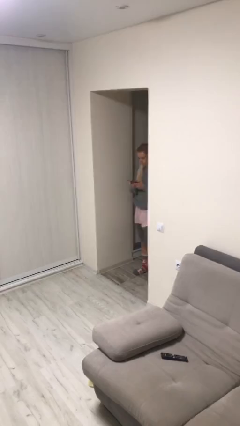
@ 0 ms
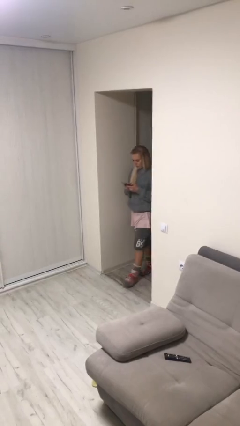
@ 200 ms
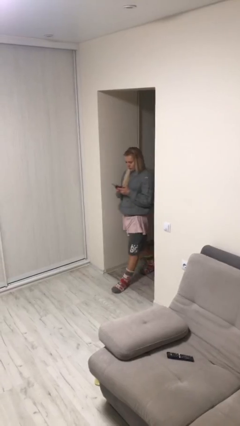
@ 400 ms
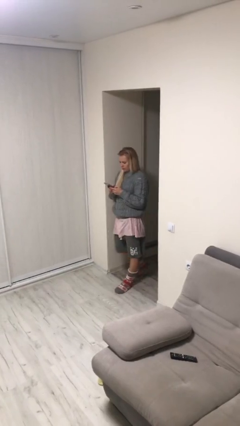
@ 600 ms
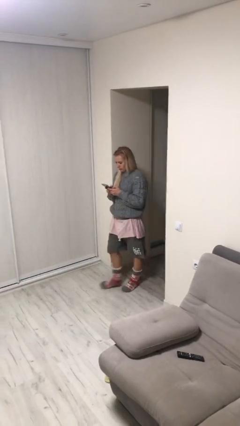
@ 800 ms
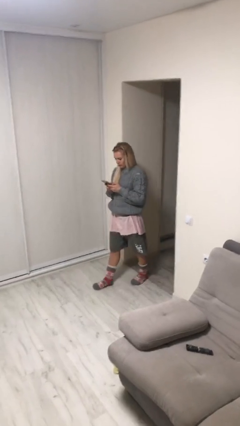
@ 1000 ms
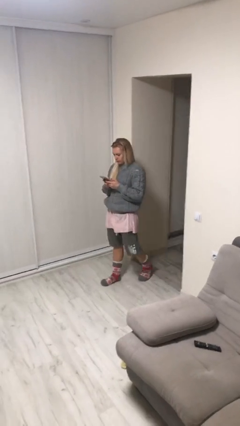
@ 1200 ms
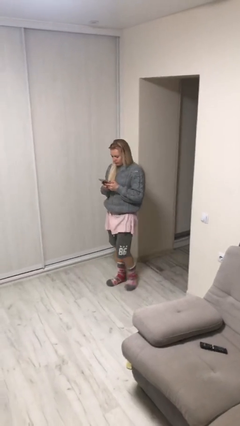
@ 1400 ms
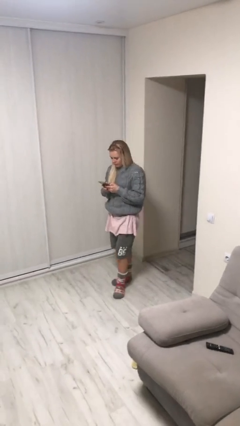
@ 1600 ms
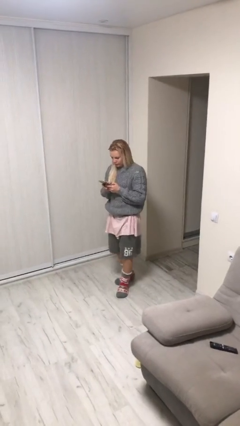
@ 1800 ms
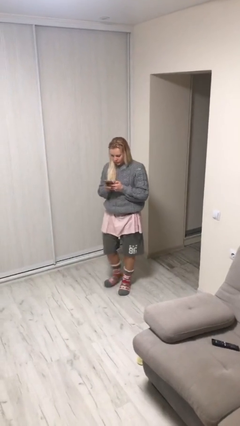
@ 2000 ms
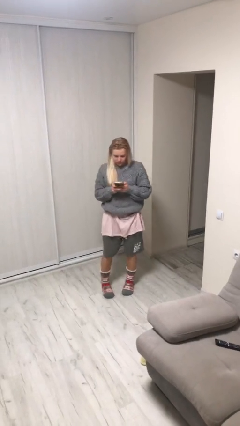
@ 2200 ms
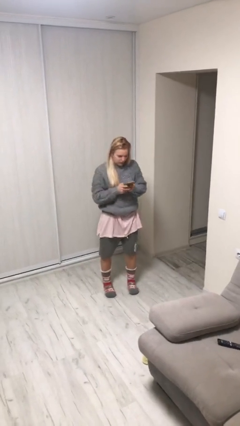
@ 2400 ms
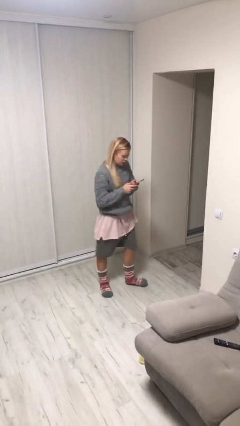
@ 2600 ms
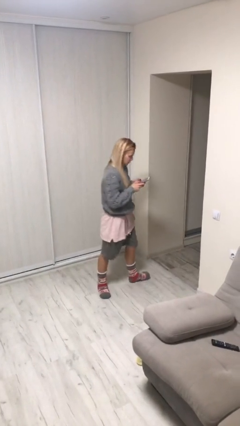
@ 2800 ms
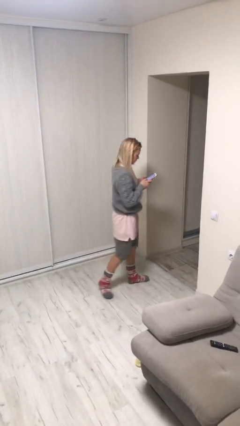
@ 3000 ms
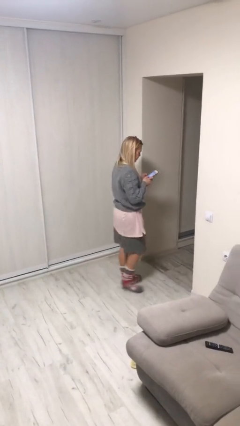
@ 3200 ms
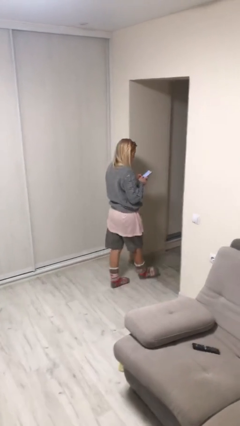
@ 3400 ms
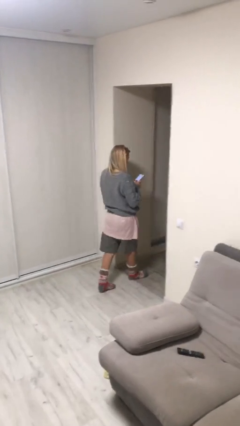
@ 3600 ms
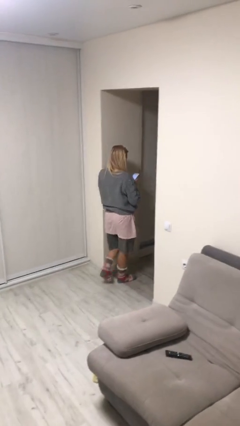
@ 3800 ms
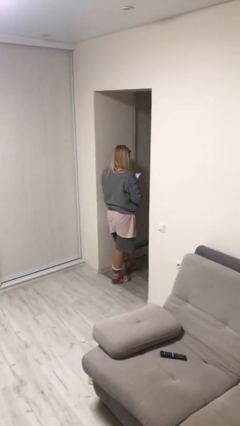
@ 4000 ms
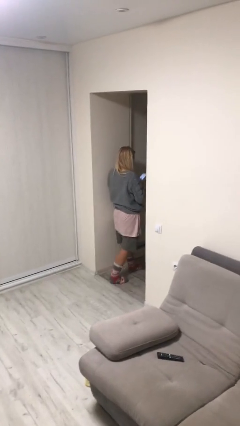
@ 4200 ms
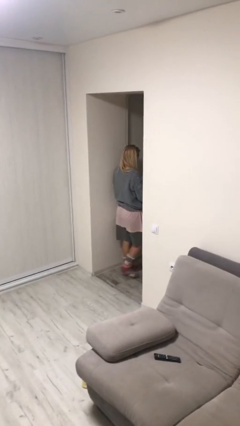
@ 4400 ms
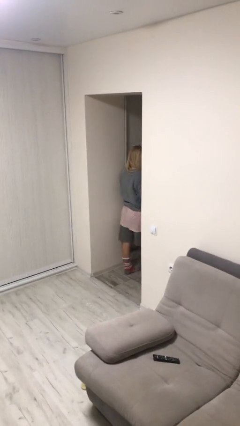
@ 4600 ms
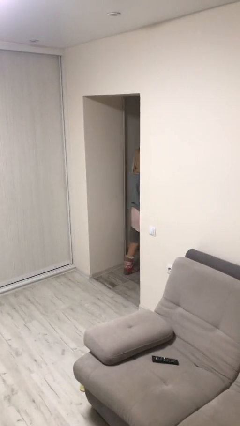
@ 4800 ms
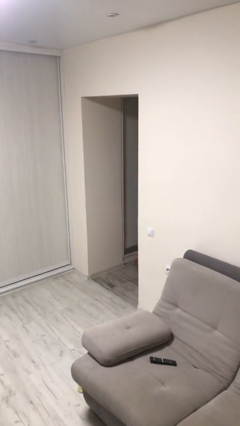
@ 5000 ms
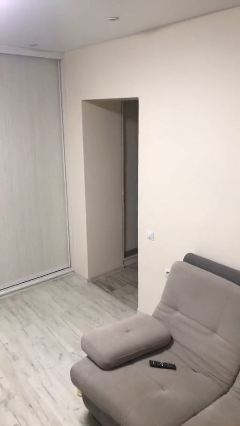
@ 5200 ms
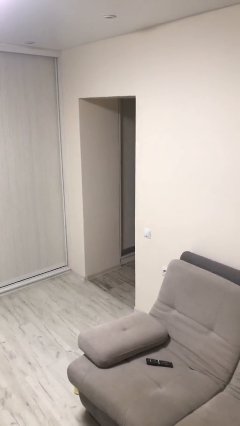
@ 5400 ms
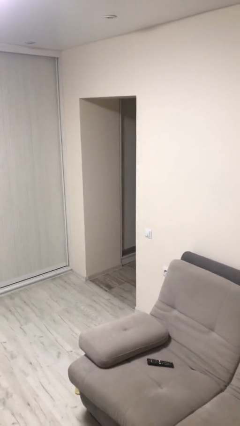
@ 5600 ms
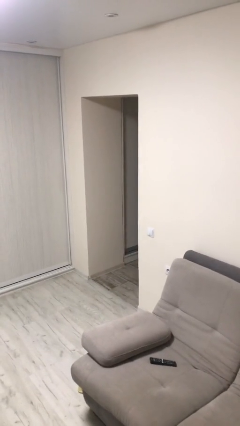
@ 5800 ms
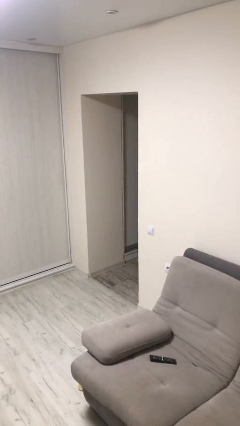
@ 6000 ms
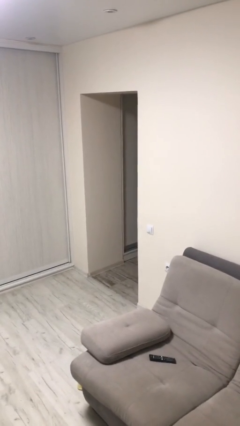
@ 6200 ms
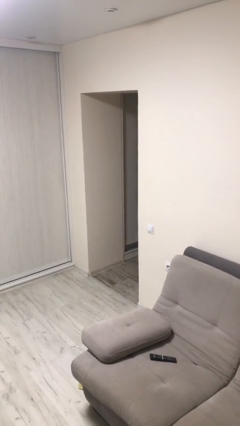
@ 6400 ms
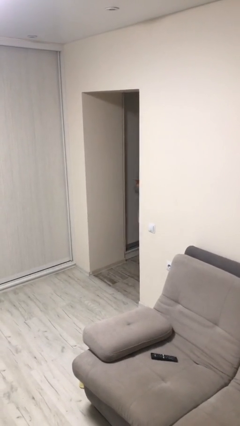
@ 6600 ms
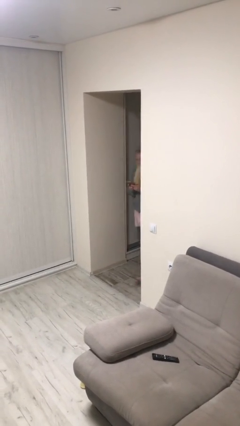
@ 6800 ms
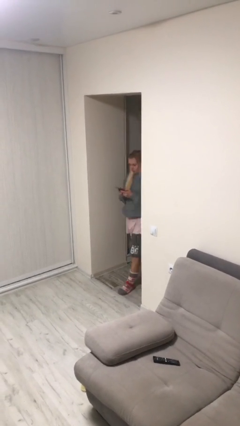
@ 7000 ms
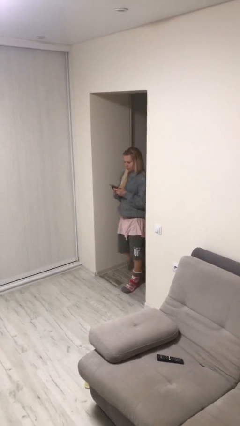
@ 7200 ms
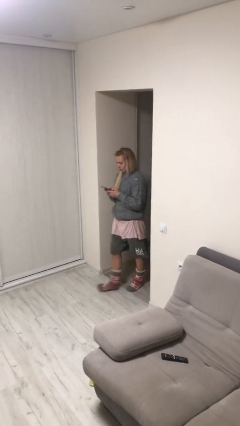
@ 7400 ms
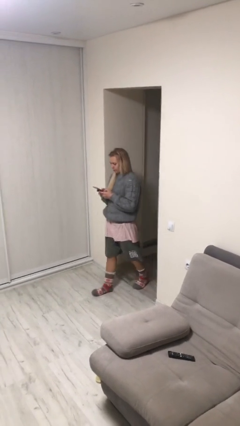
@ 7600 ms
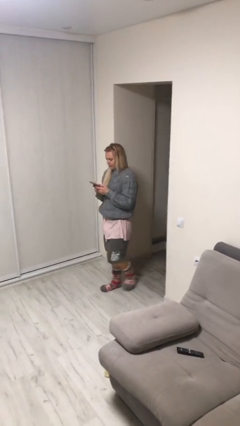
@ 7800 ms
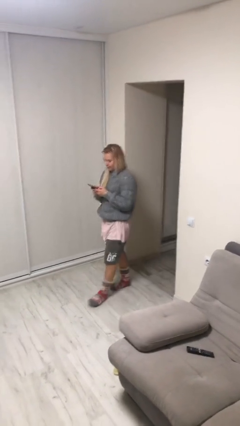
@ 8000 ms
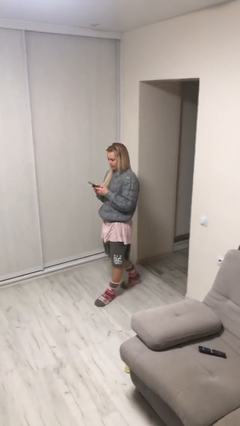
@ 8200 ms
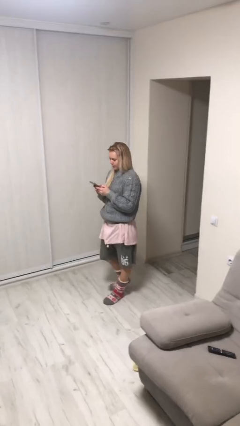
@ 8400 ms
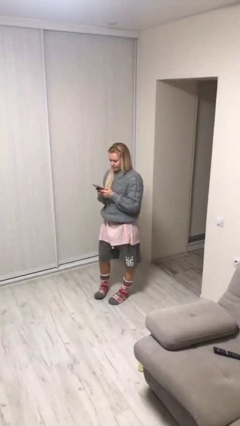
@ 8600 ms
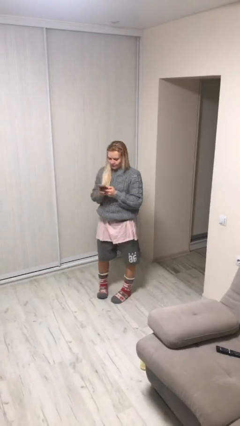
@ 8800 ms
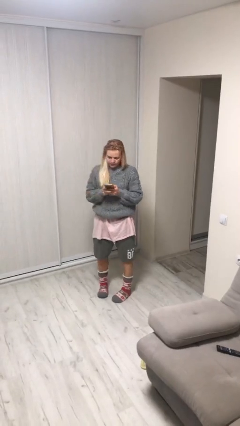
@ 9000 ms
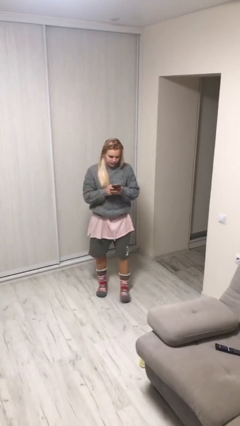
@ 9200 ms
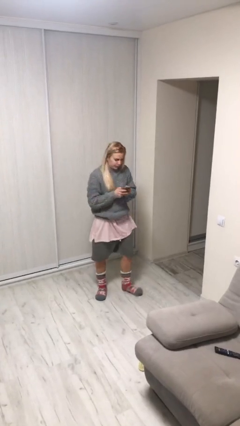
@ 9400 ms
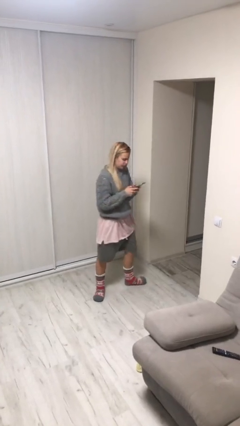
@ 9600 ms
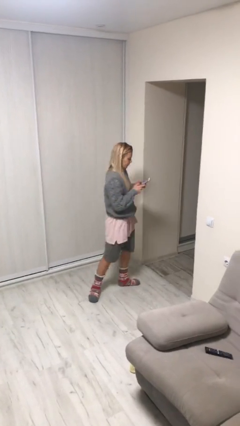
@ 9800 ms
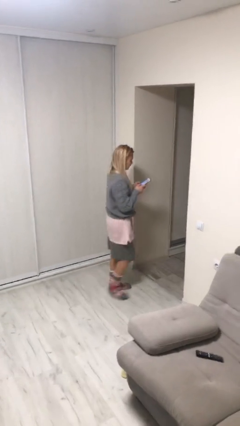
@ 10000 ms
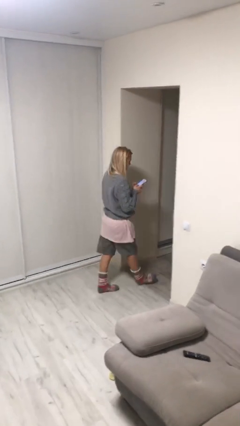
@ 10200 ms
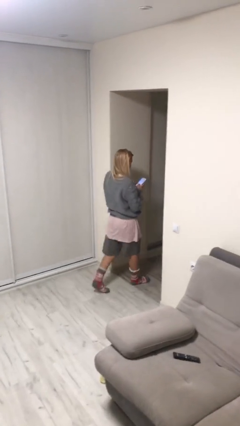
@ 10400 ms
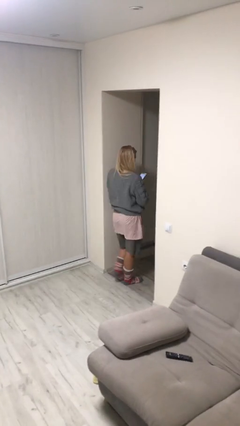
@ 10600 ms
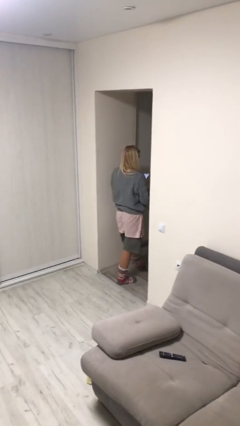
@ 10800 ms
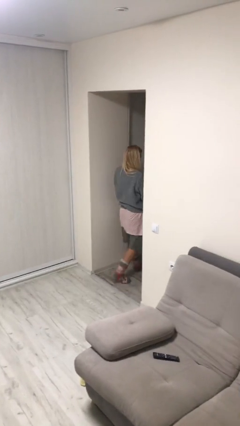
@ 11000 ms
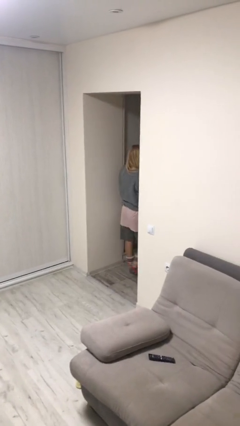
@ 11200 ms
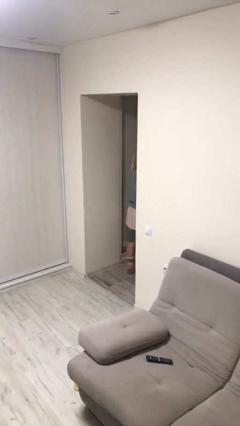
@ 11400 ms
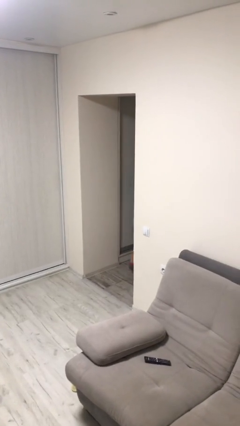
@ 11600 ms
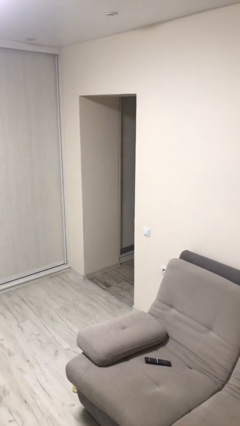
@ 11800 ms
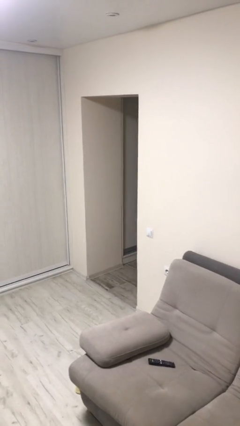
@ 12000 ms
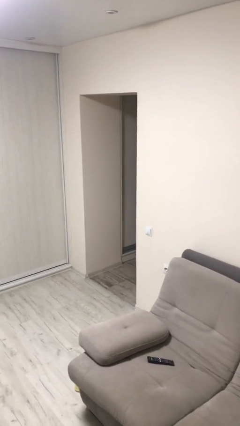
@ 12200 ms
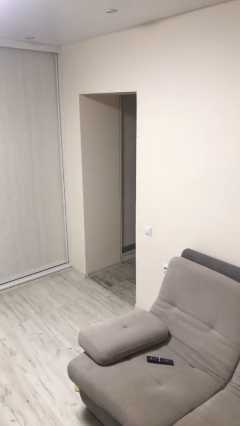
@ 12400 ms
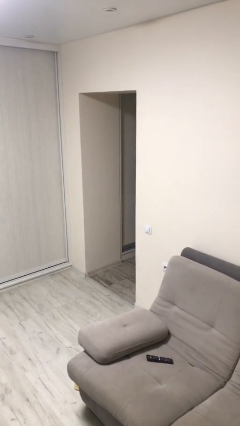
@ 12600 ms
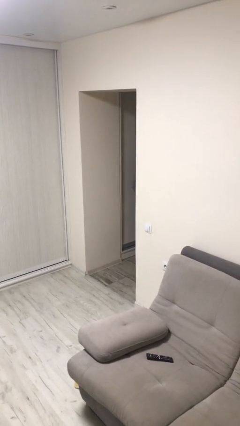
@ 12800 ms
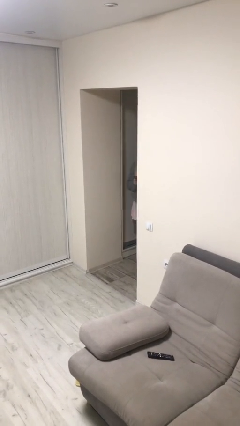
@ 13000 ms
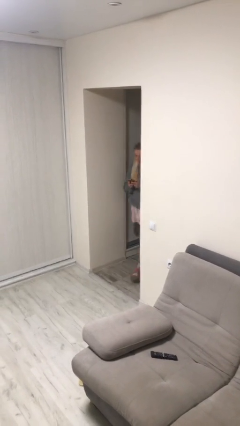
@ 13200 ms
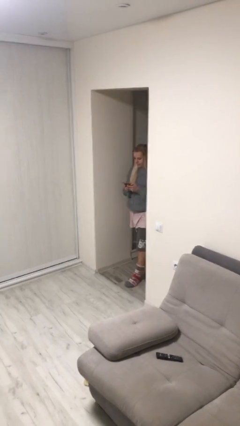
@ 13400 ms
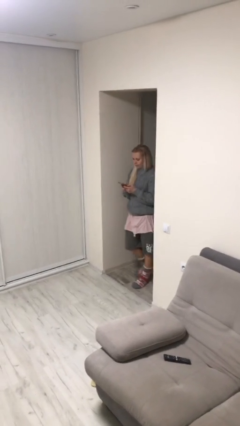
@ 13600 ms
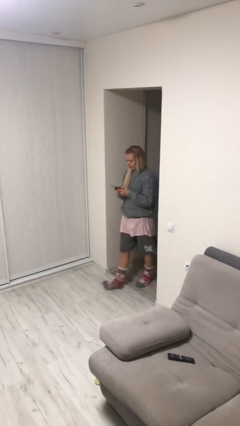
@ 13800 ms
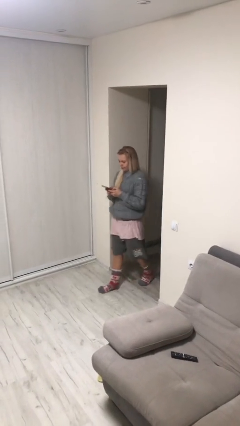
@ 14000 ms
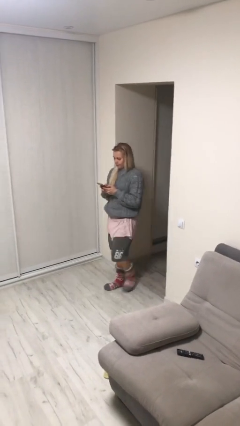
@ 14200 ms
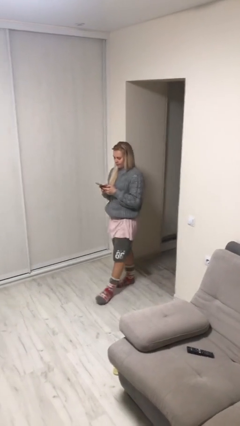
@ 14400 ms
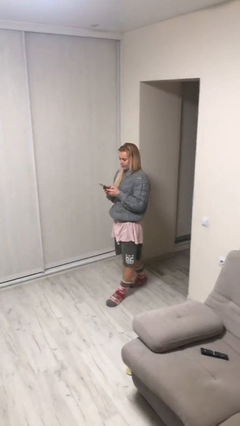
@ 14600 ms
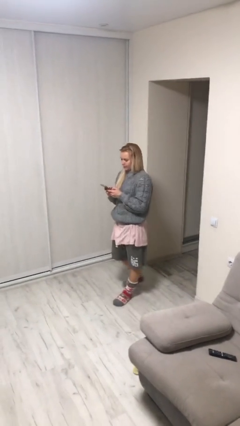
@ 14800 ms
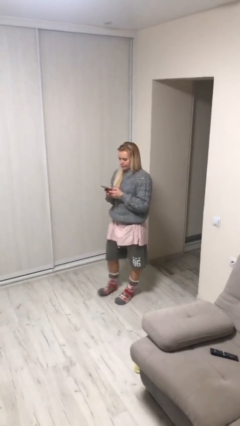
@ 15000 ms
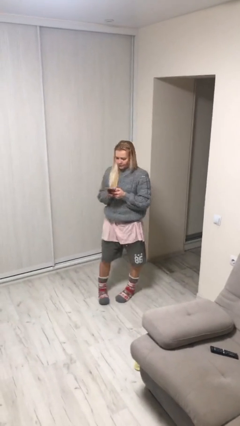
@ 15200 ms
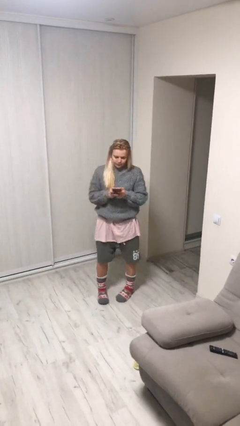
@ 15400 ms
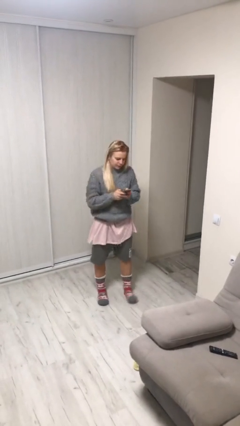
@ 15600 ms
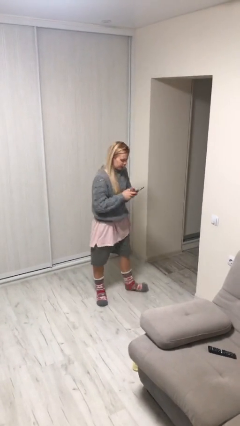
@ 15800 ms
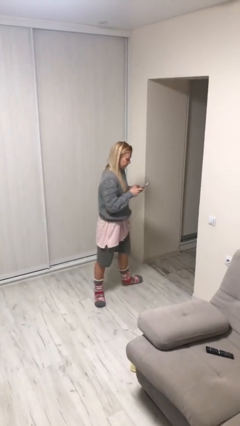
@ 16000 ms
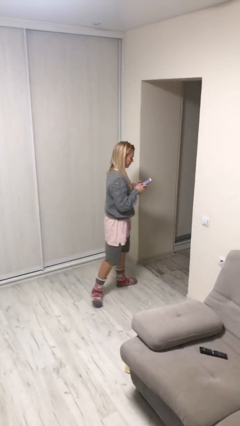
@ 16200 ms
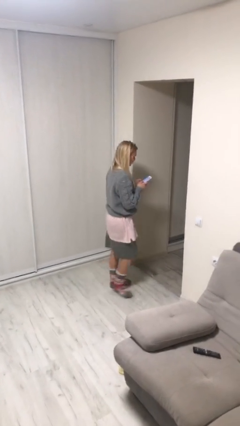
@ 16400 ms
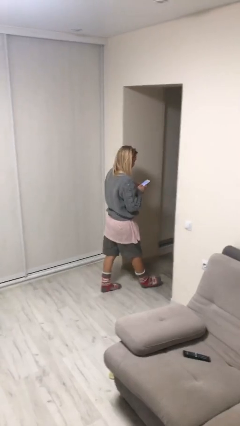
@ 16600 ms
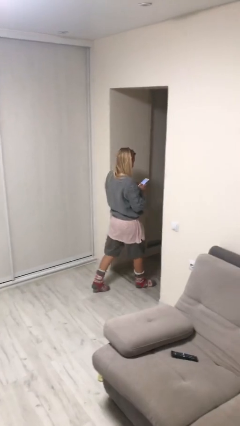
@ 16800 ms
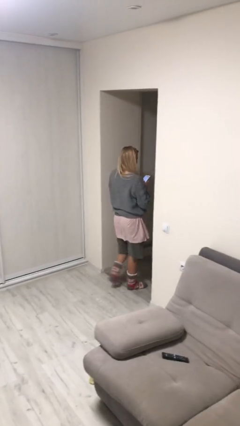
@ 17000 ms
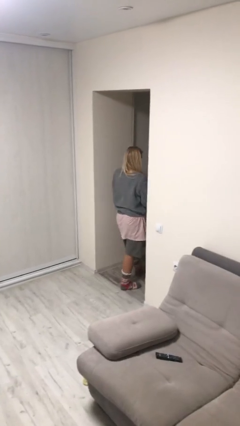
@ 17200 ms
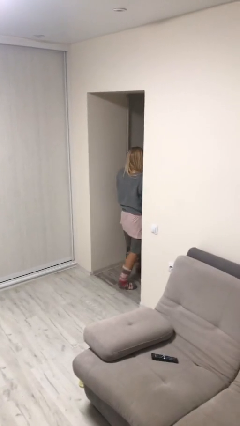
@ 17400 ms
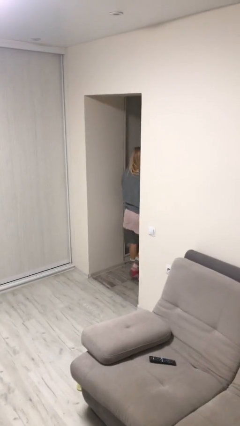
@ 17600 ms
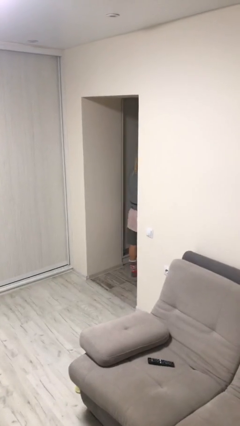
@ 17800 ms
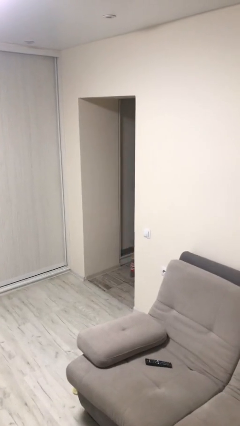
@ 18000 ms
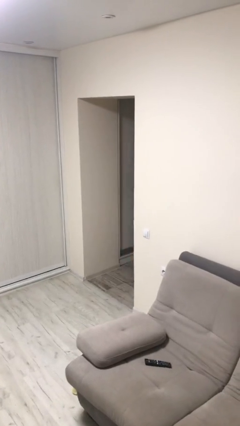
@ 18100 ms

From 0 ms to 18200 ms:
person texts on phone
